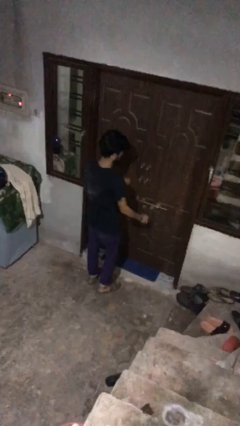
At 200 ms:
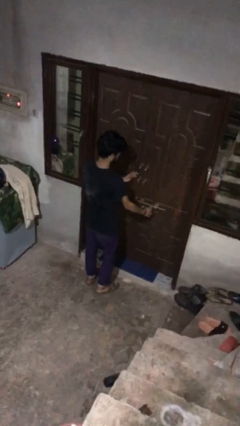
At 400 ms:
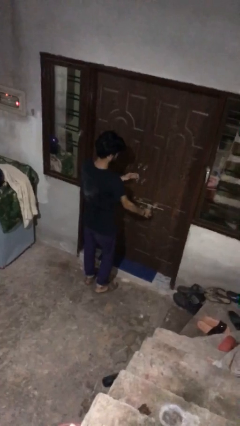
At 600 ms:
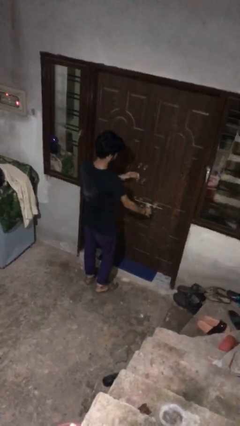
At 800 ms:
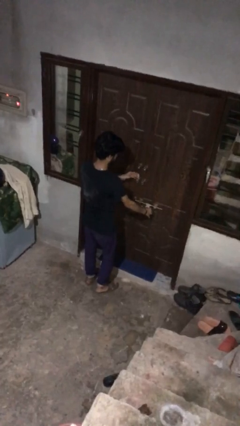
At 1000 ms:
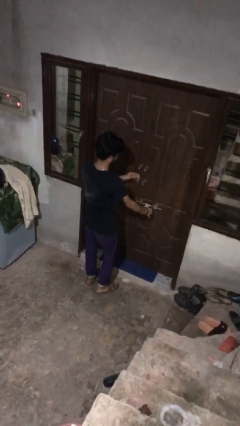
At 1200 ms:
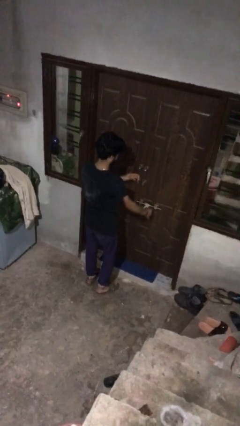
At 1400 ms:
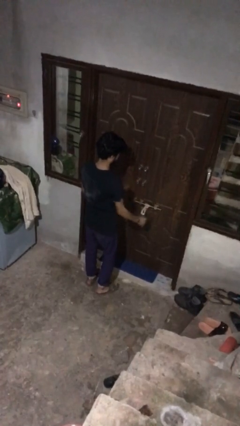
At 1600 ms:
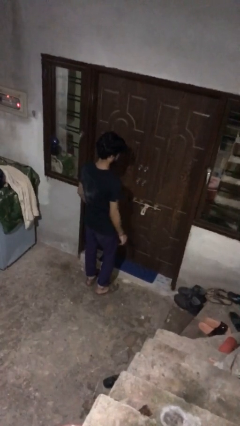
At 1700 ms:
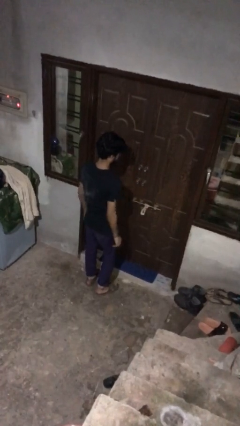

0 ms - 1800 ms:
person locks door with keys

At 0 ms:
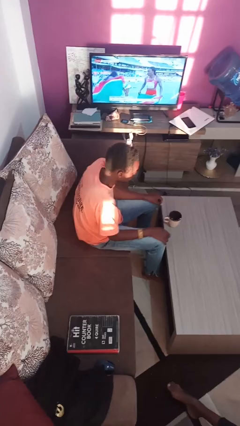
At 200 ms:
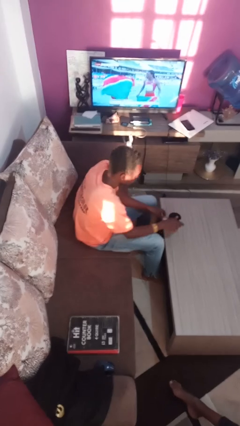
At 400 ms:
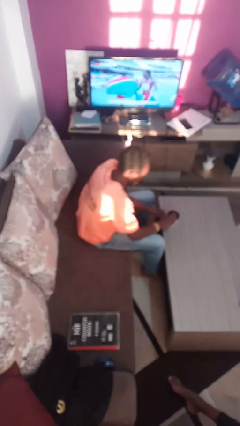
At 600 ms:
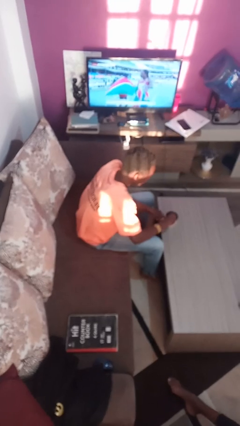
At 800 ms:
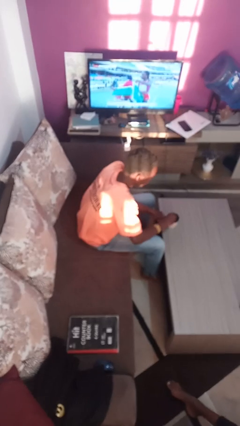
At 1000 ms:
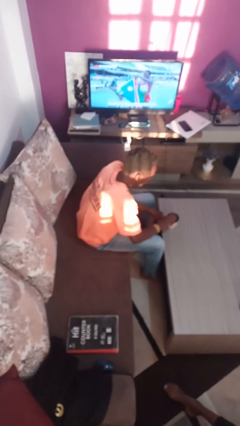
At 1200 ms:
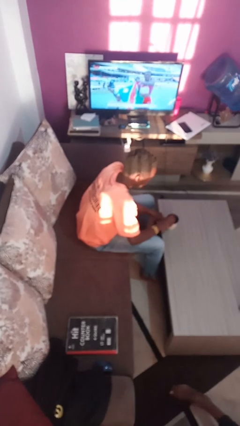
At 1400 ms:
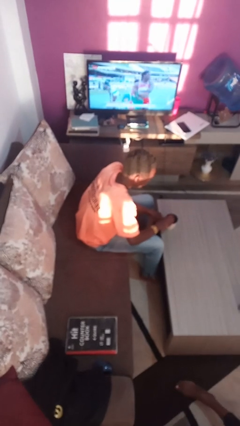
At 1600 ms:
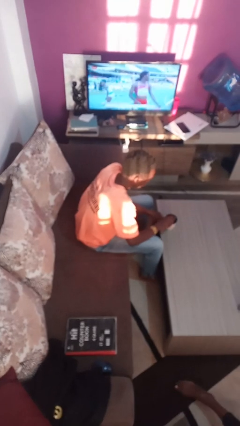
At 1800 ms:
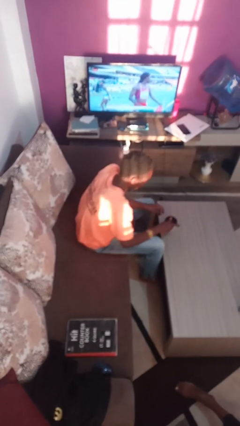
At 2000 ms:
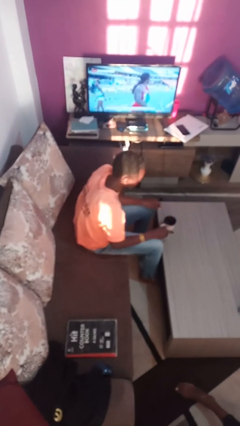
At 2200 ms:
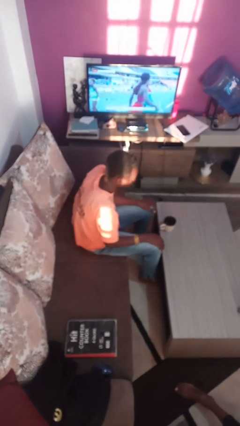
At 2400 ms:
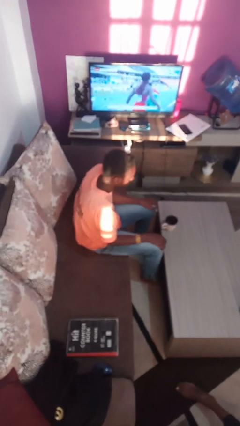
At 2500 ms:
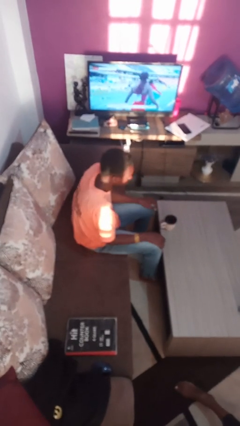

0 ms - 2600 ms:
person stirs mug

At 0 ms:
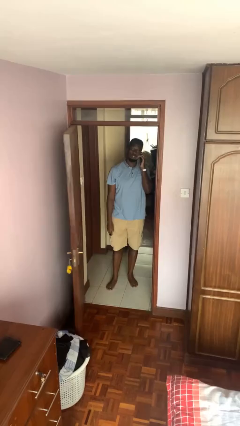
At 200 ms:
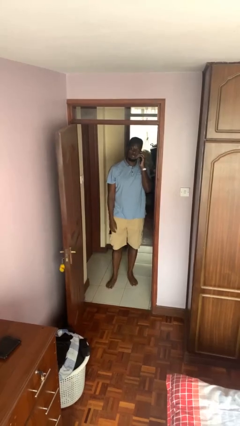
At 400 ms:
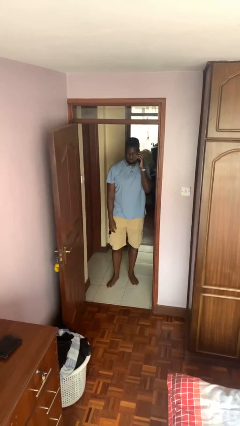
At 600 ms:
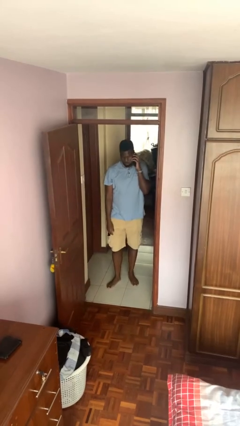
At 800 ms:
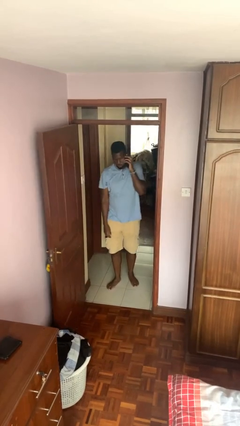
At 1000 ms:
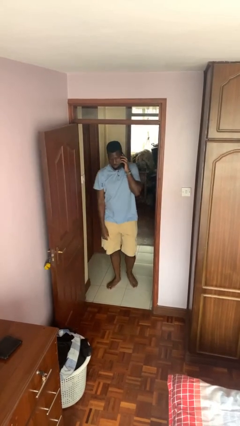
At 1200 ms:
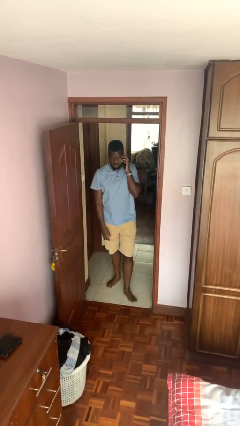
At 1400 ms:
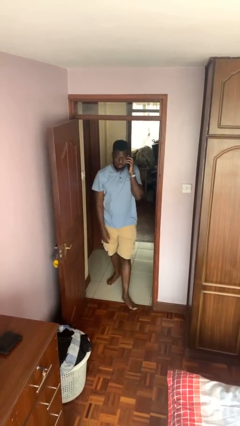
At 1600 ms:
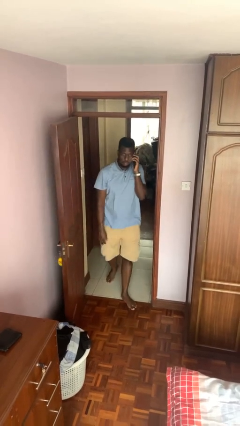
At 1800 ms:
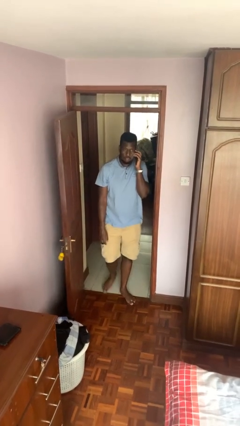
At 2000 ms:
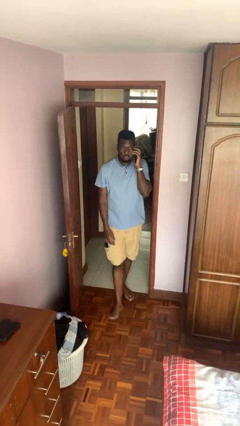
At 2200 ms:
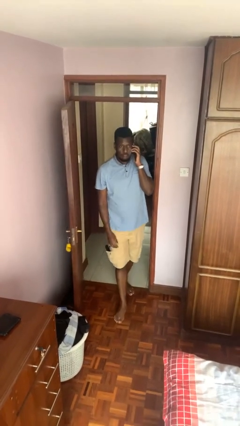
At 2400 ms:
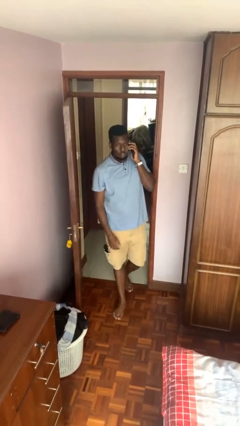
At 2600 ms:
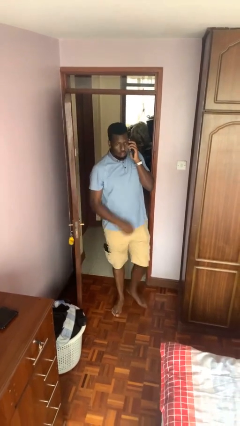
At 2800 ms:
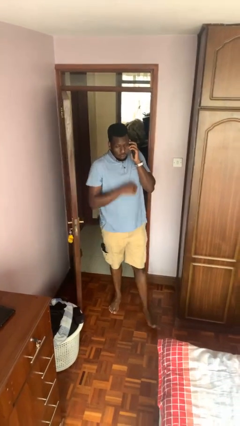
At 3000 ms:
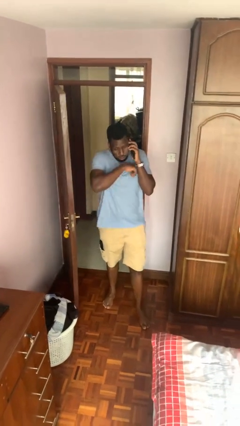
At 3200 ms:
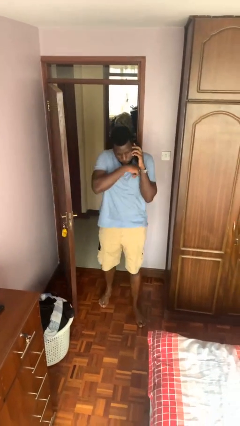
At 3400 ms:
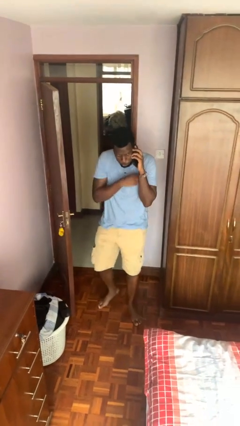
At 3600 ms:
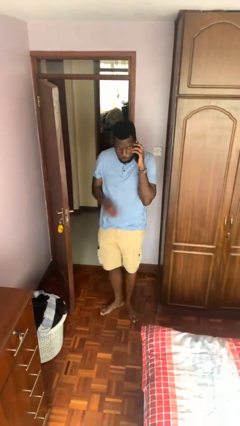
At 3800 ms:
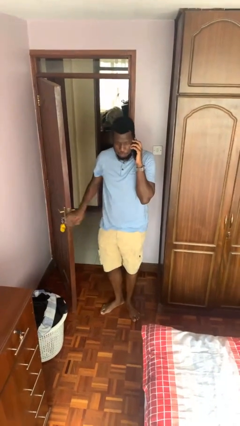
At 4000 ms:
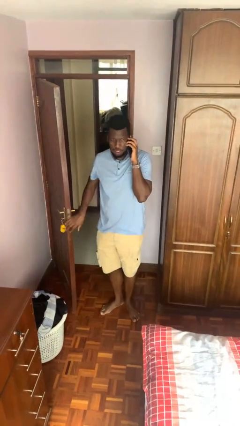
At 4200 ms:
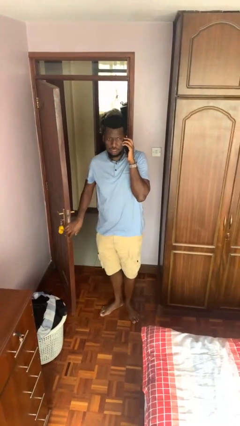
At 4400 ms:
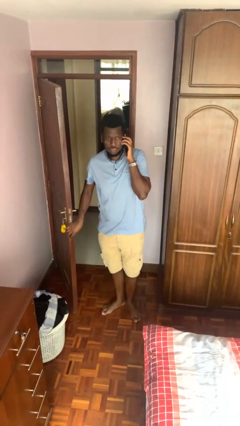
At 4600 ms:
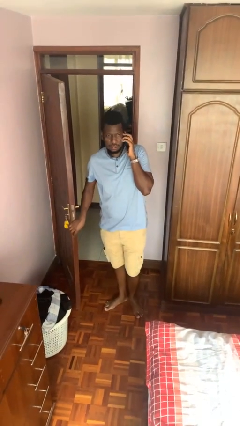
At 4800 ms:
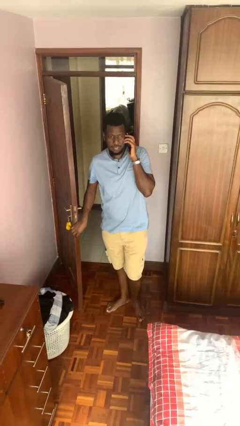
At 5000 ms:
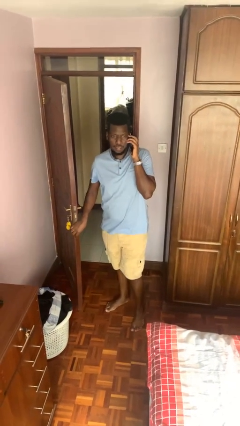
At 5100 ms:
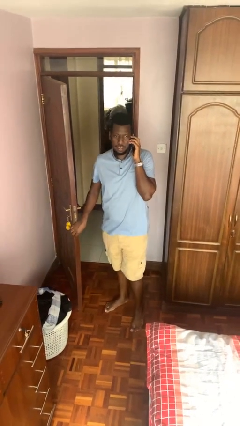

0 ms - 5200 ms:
person enters scene through structure

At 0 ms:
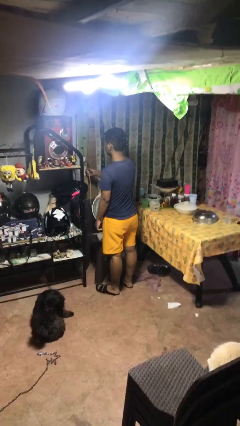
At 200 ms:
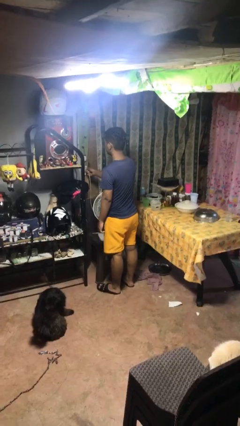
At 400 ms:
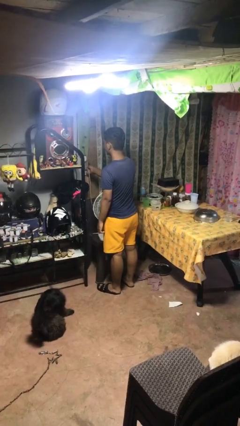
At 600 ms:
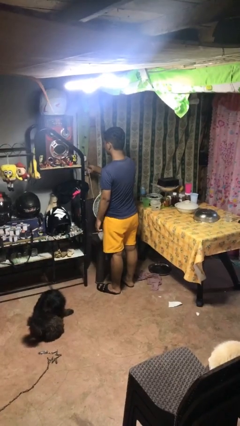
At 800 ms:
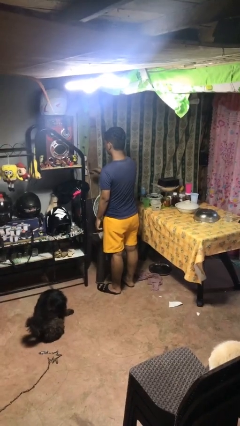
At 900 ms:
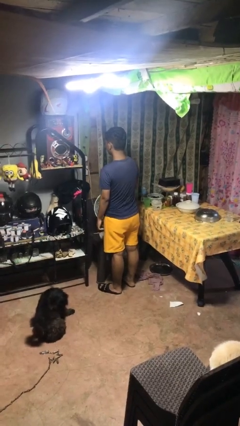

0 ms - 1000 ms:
person plugs into electrical socket

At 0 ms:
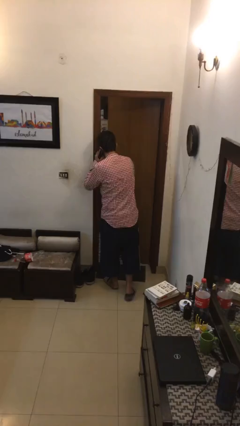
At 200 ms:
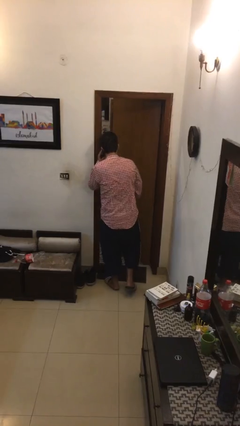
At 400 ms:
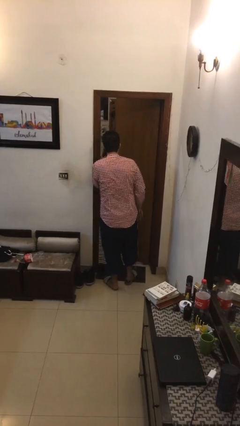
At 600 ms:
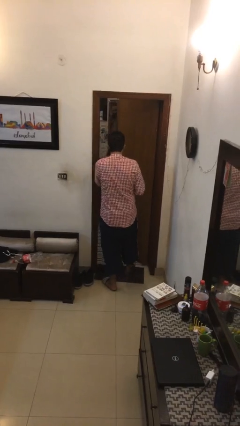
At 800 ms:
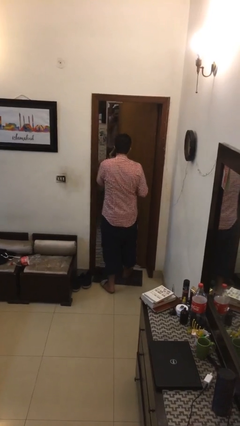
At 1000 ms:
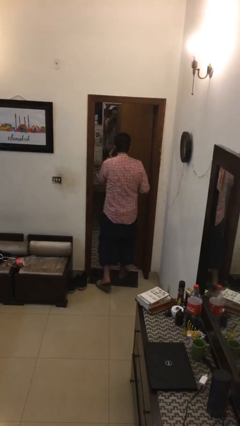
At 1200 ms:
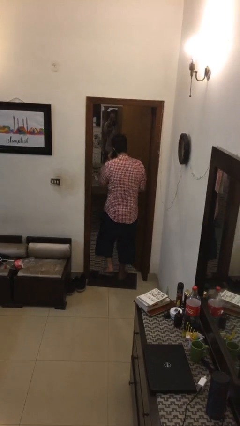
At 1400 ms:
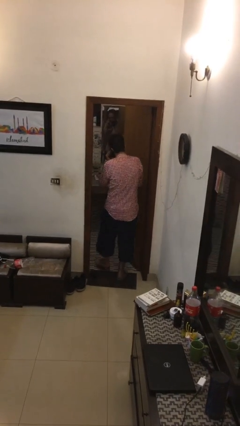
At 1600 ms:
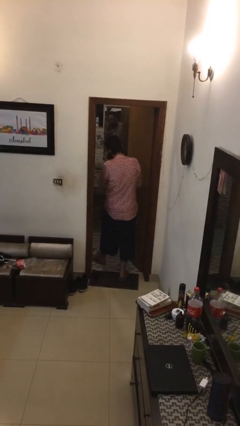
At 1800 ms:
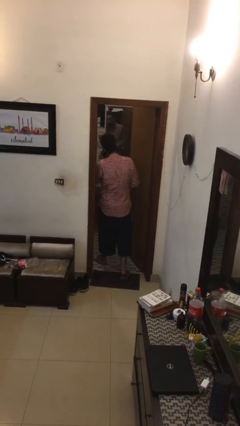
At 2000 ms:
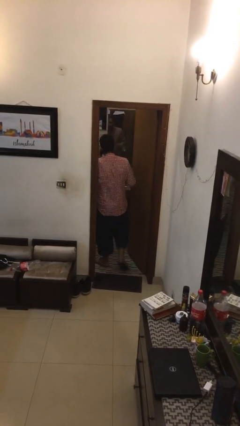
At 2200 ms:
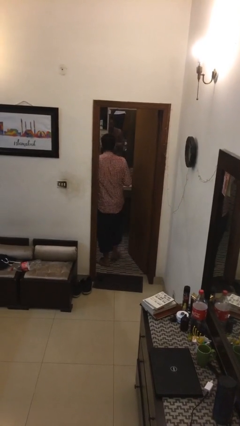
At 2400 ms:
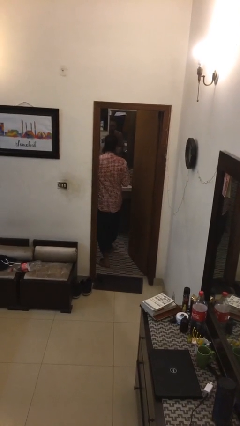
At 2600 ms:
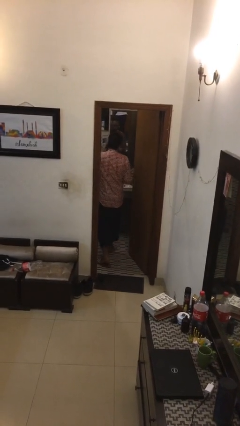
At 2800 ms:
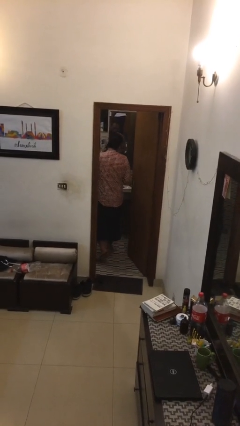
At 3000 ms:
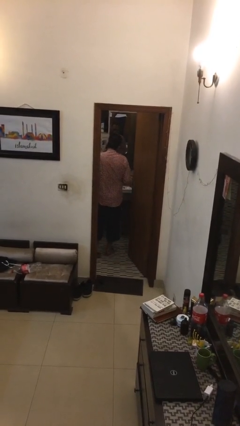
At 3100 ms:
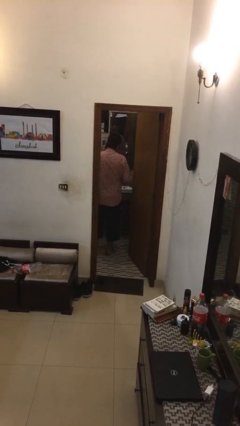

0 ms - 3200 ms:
person exits scene through structure

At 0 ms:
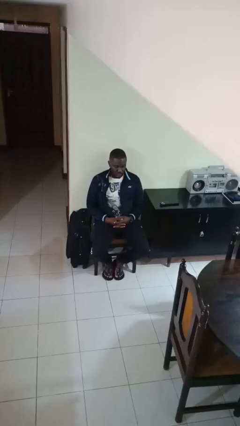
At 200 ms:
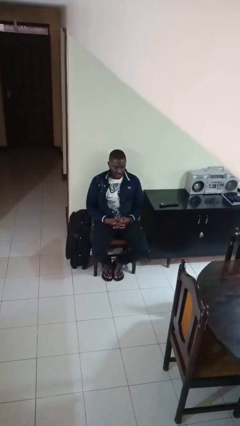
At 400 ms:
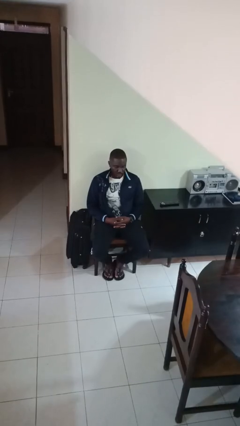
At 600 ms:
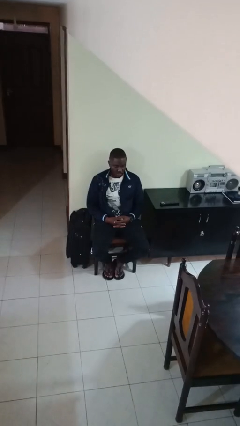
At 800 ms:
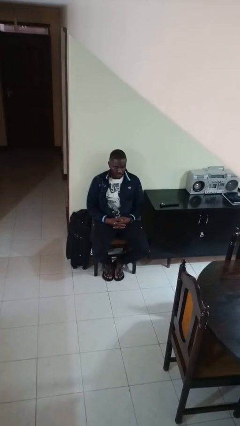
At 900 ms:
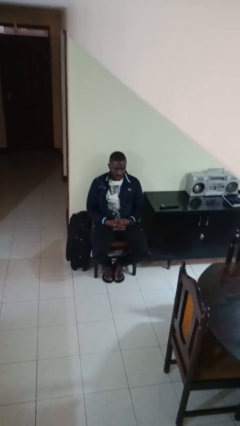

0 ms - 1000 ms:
person scratches face

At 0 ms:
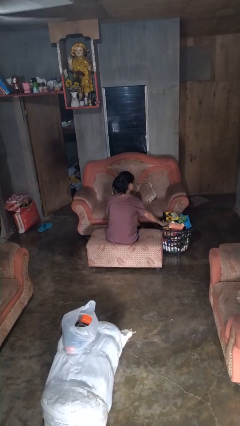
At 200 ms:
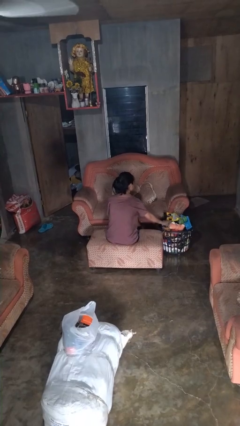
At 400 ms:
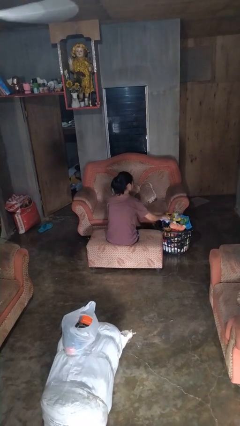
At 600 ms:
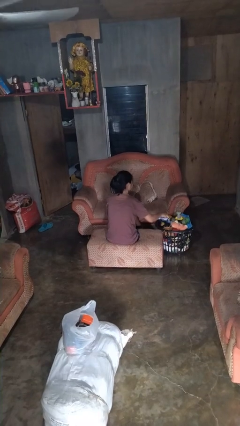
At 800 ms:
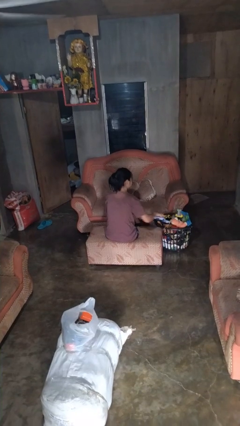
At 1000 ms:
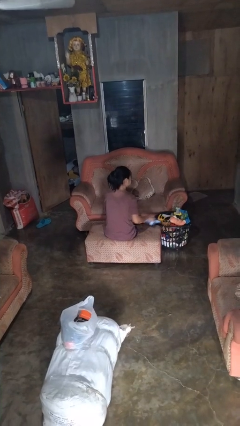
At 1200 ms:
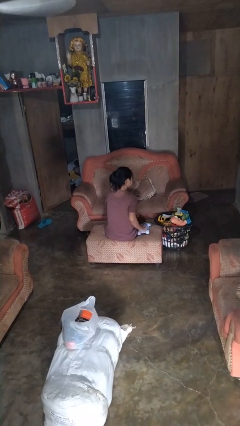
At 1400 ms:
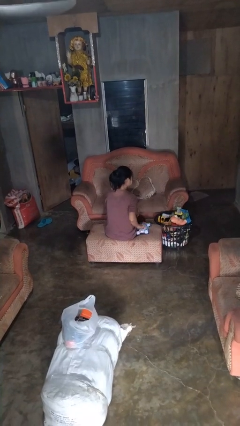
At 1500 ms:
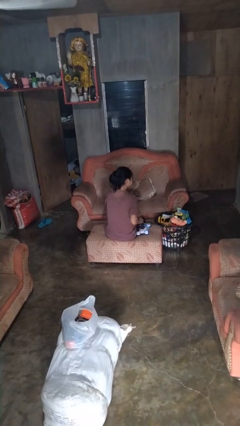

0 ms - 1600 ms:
person takes object from basket

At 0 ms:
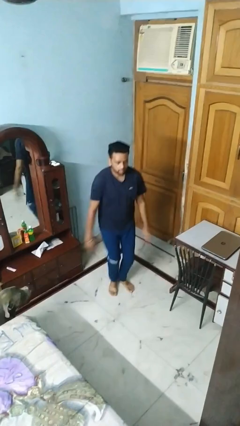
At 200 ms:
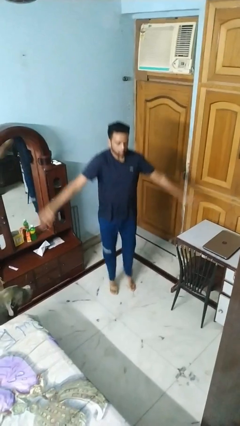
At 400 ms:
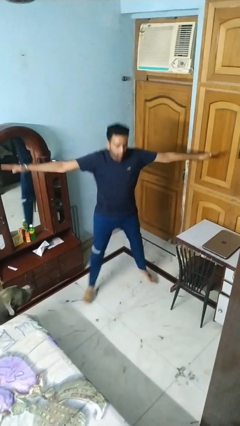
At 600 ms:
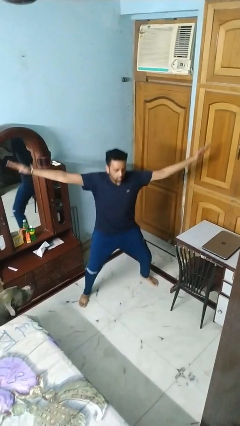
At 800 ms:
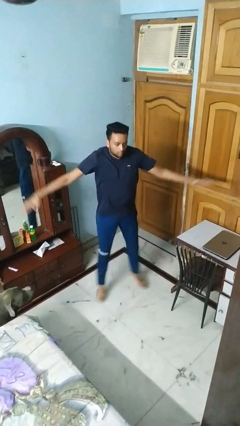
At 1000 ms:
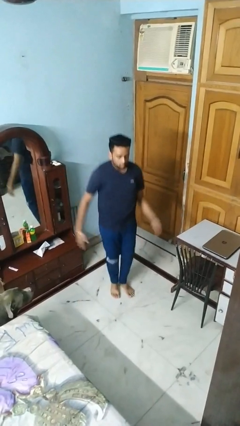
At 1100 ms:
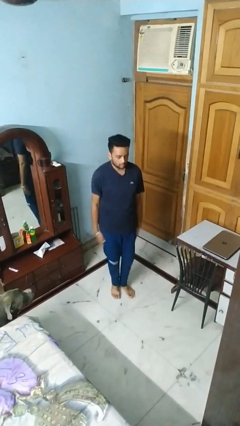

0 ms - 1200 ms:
person exercises with jumping jacks
